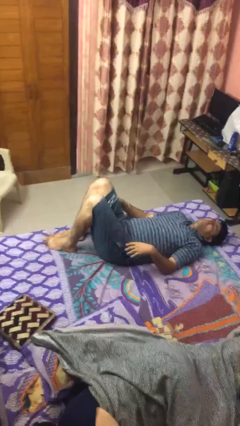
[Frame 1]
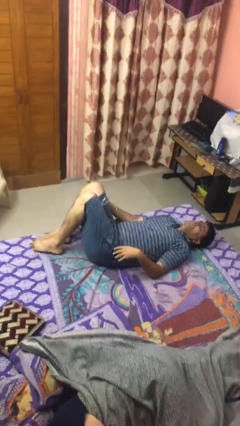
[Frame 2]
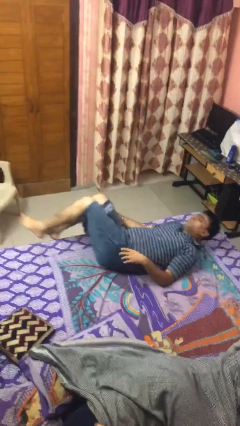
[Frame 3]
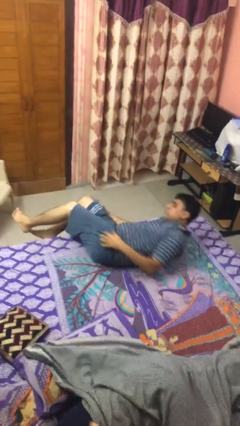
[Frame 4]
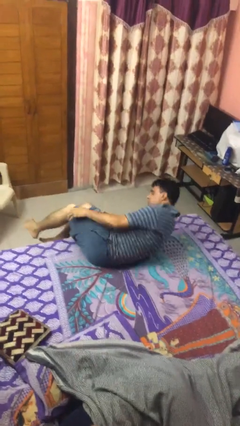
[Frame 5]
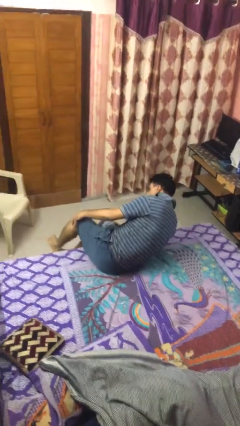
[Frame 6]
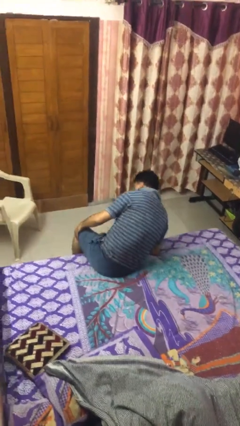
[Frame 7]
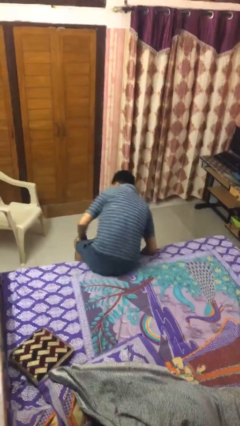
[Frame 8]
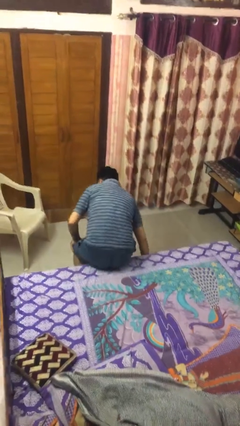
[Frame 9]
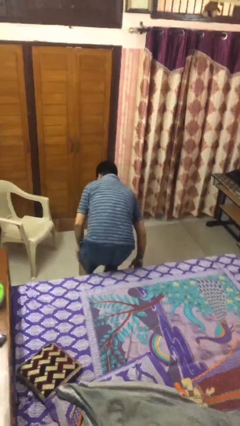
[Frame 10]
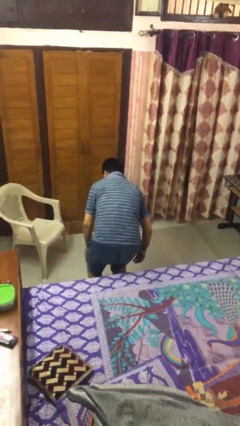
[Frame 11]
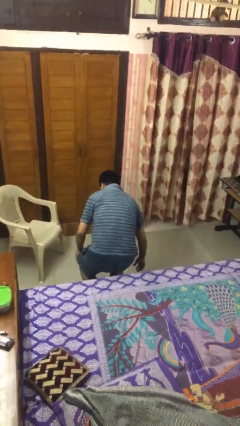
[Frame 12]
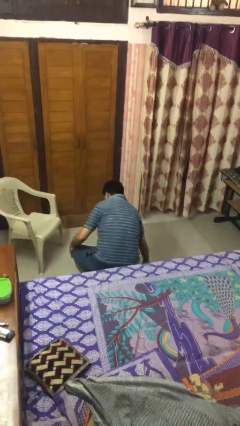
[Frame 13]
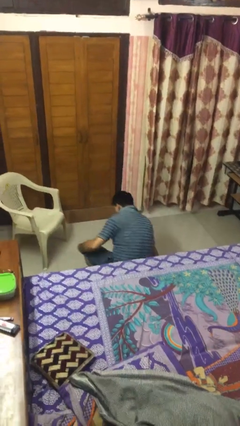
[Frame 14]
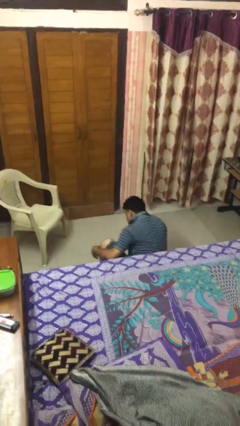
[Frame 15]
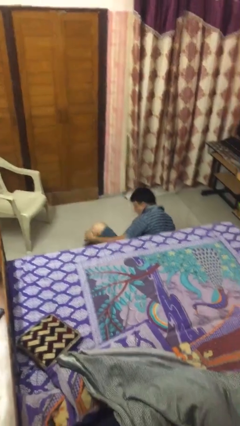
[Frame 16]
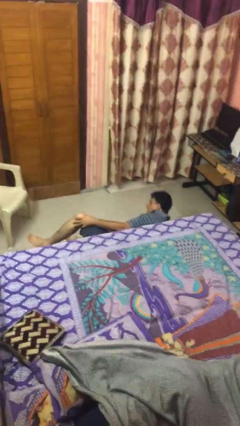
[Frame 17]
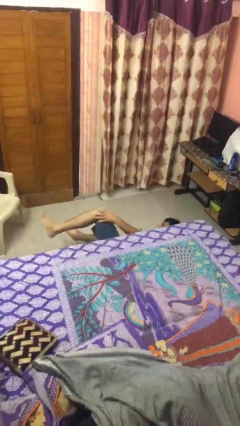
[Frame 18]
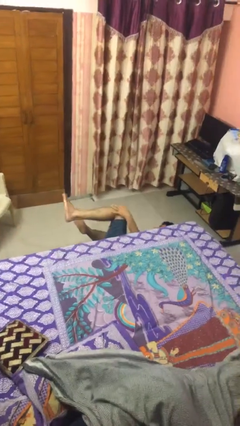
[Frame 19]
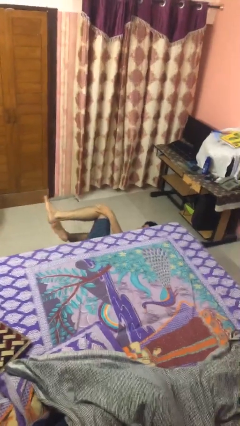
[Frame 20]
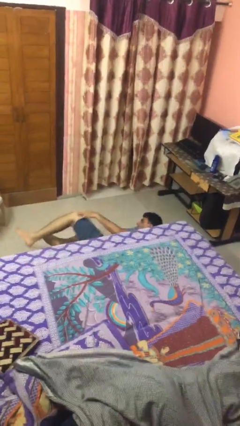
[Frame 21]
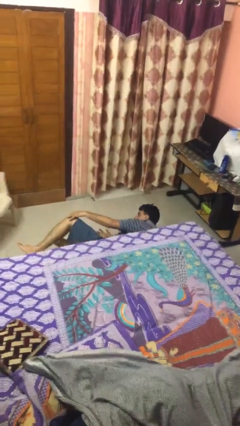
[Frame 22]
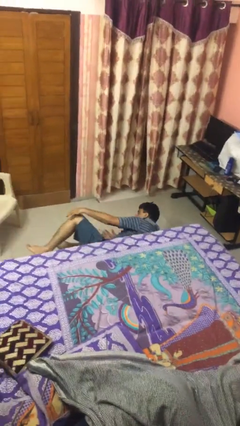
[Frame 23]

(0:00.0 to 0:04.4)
person falls from bed

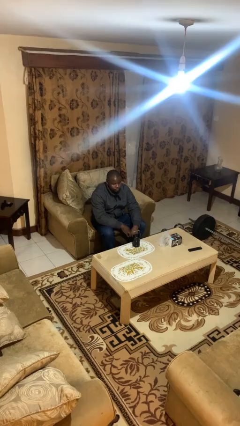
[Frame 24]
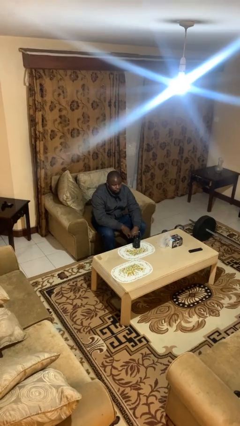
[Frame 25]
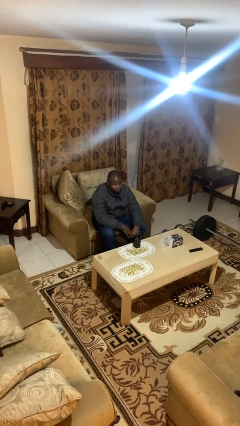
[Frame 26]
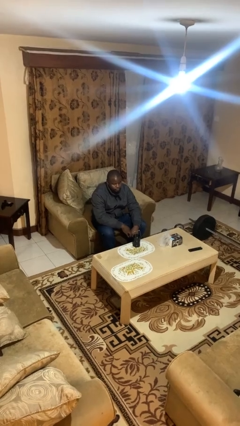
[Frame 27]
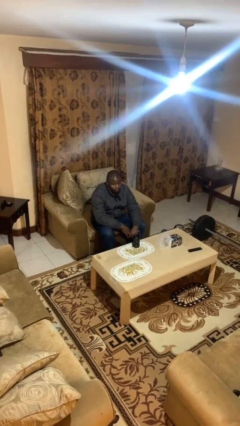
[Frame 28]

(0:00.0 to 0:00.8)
person turns on lamp

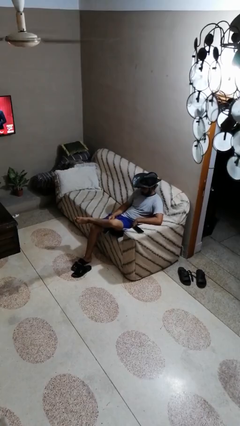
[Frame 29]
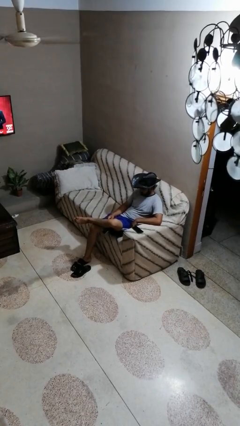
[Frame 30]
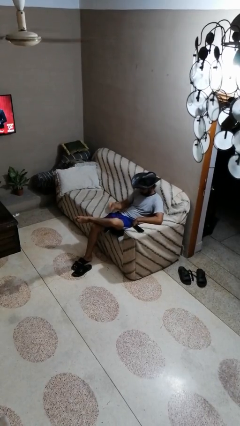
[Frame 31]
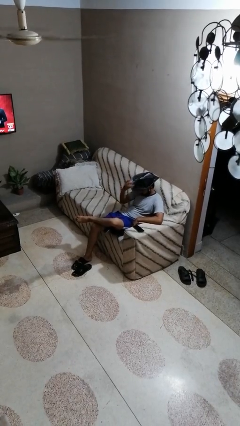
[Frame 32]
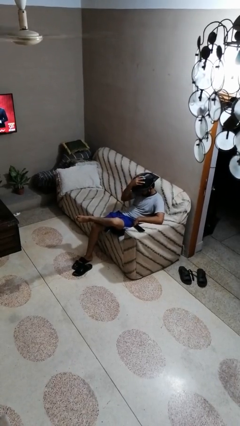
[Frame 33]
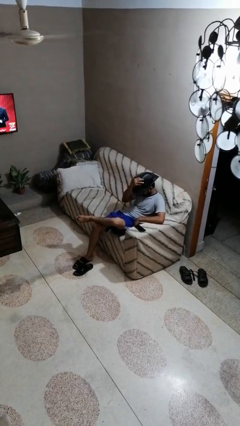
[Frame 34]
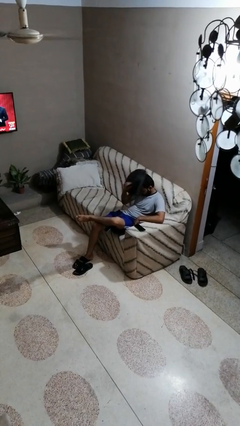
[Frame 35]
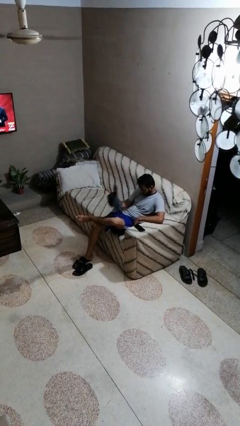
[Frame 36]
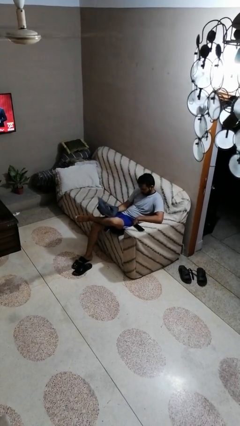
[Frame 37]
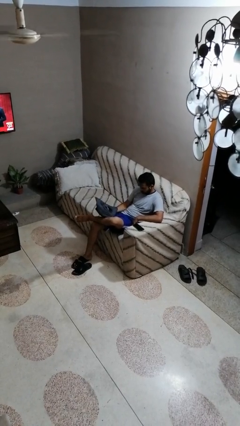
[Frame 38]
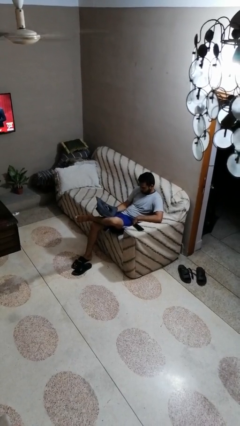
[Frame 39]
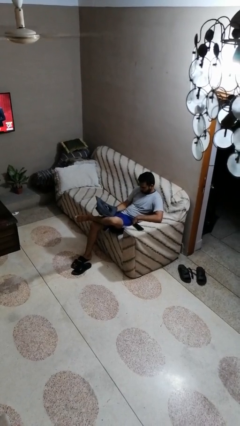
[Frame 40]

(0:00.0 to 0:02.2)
person takes off hat

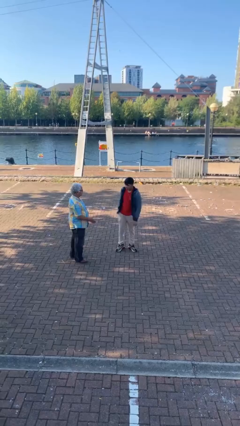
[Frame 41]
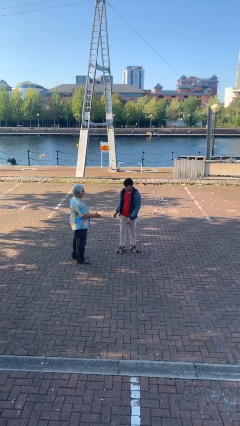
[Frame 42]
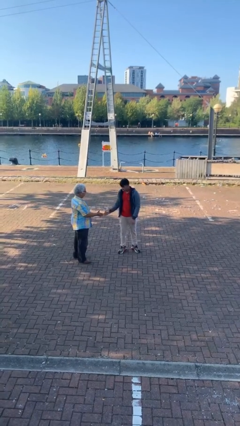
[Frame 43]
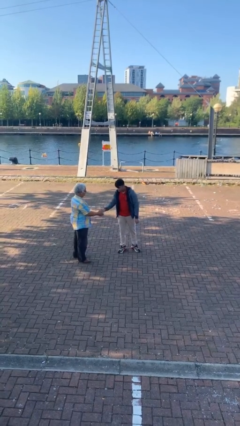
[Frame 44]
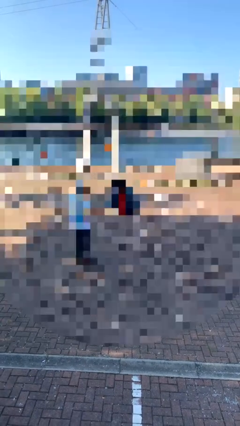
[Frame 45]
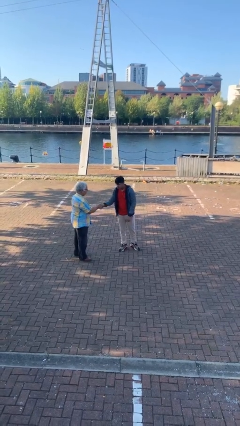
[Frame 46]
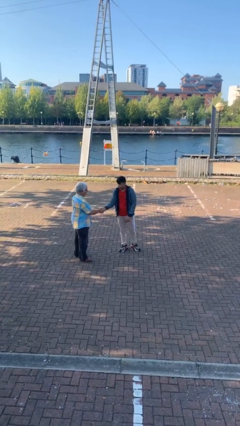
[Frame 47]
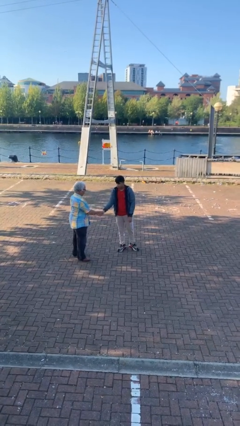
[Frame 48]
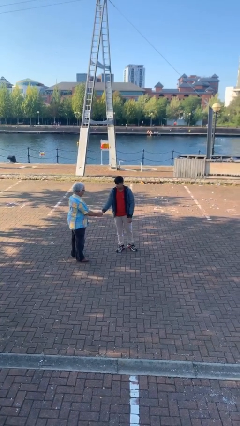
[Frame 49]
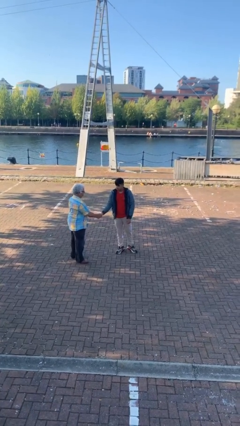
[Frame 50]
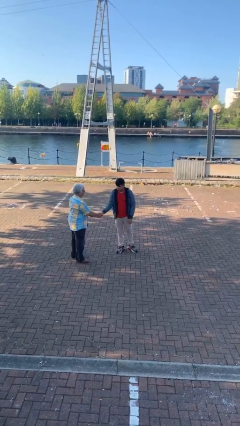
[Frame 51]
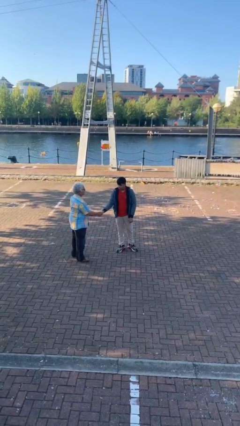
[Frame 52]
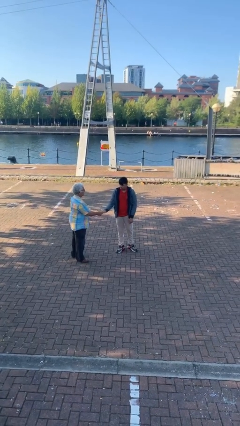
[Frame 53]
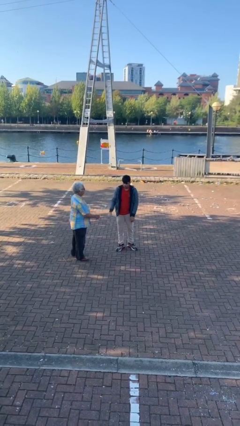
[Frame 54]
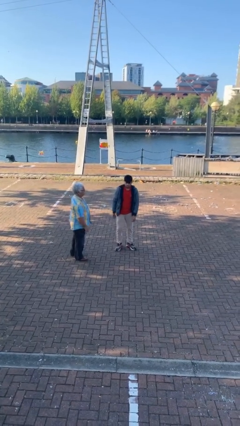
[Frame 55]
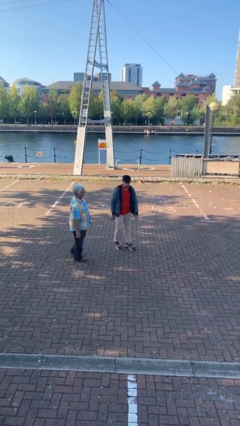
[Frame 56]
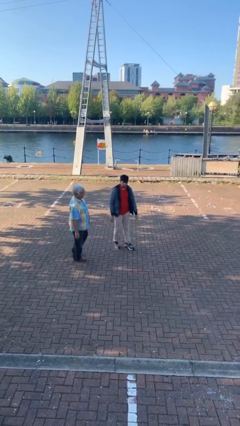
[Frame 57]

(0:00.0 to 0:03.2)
person shakes hand

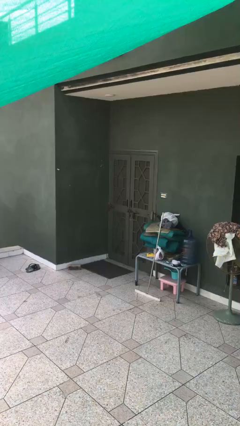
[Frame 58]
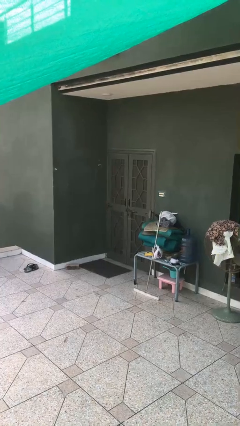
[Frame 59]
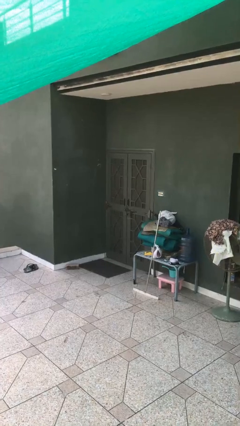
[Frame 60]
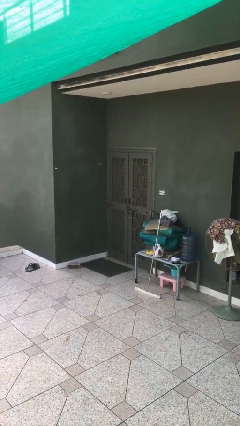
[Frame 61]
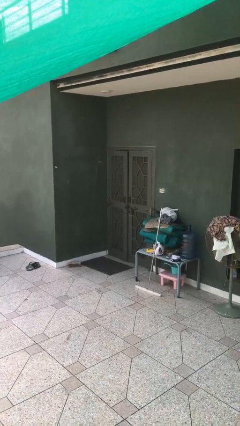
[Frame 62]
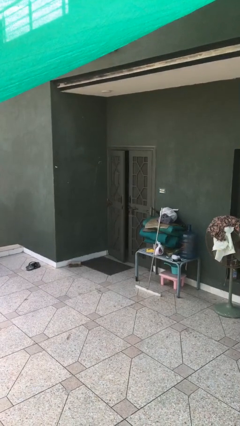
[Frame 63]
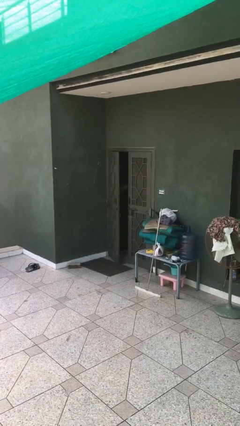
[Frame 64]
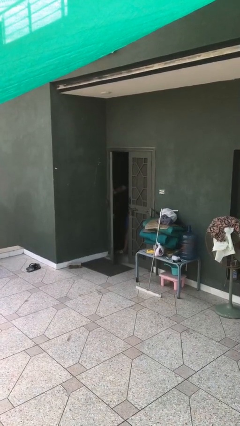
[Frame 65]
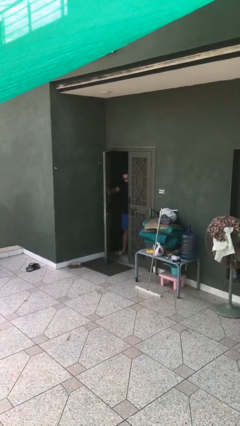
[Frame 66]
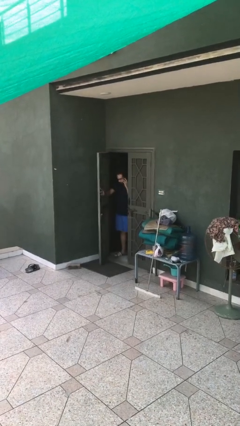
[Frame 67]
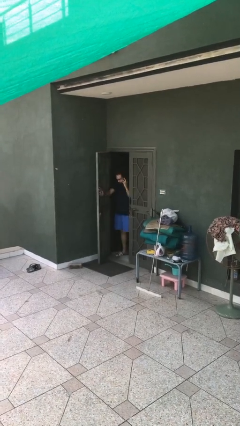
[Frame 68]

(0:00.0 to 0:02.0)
person opens facility door

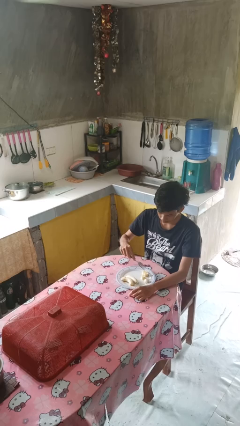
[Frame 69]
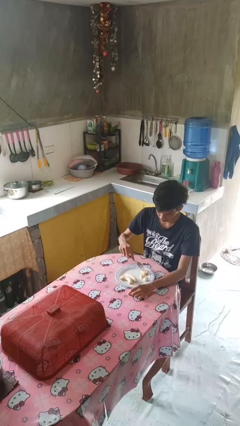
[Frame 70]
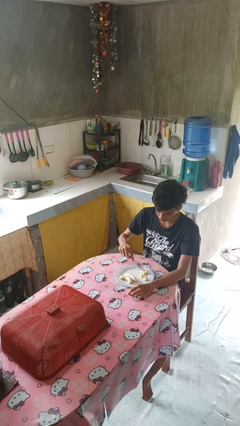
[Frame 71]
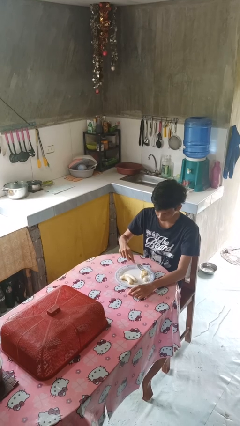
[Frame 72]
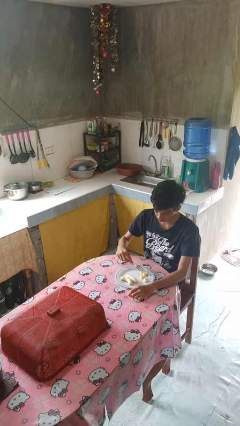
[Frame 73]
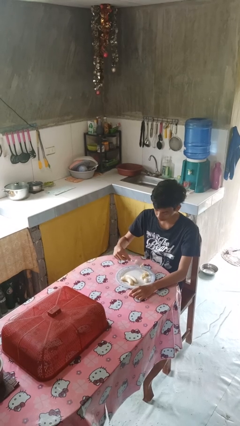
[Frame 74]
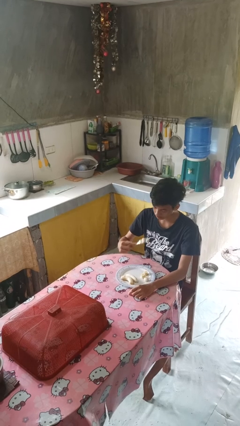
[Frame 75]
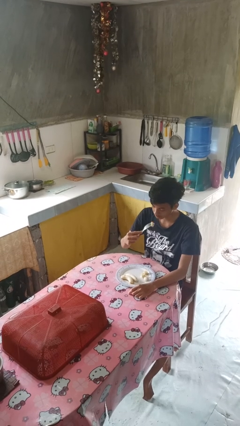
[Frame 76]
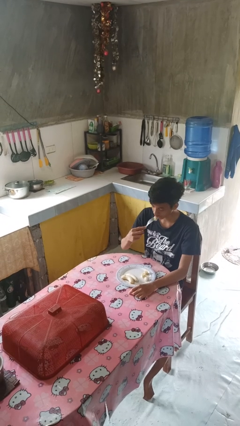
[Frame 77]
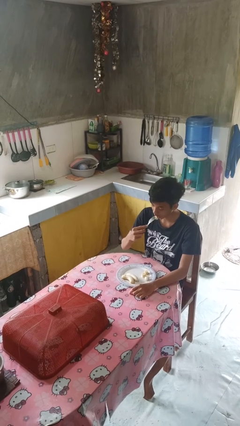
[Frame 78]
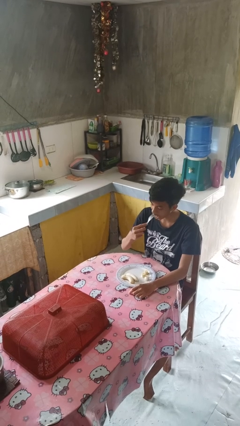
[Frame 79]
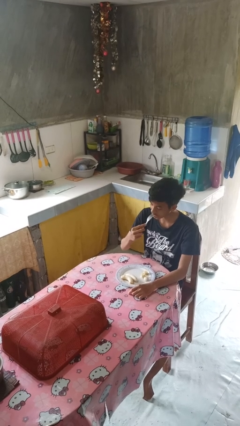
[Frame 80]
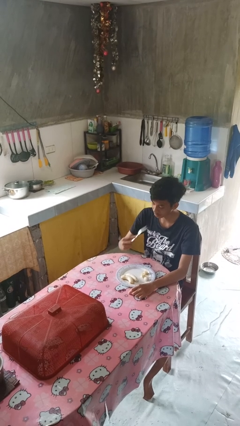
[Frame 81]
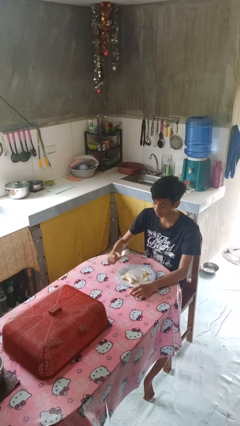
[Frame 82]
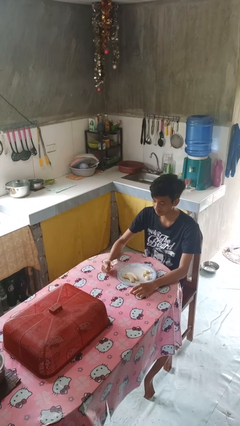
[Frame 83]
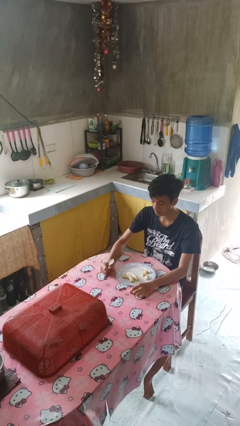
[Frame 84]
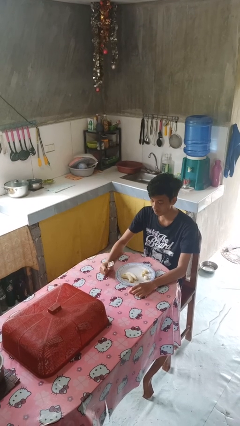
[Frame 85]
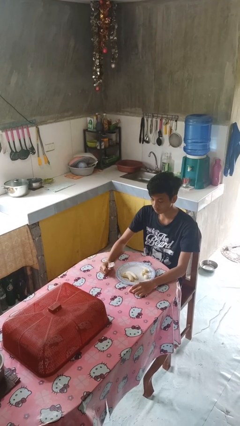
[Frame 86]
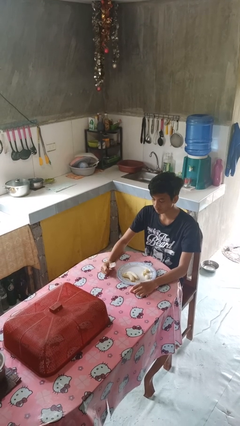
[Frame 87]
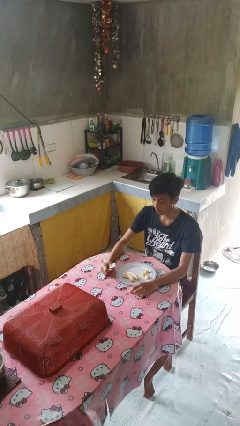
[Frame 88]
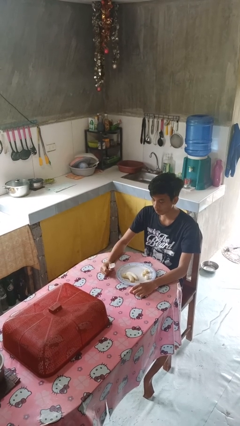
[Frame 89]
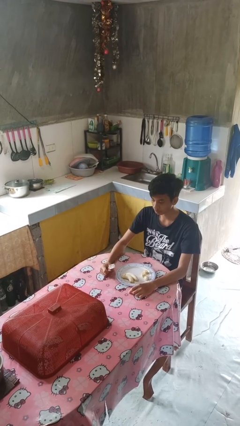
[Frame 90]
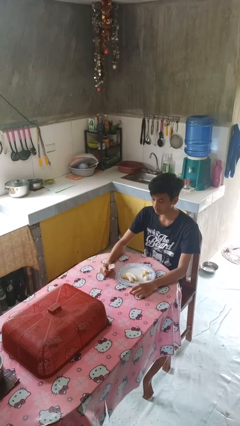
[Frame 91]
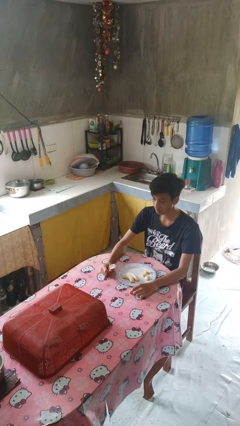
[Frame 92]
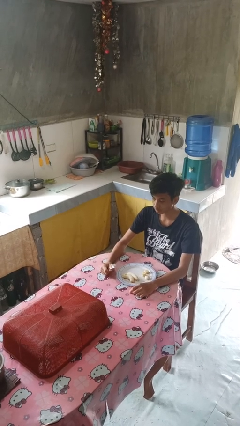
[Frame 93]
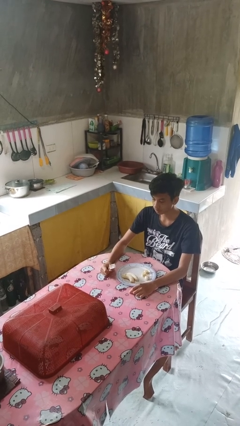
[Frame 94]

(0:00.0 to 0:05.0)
person eats with utensil
